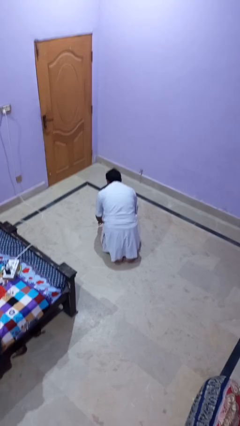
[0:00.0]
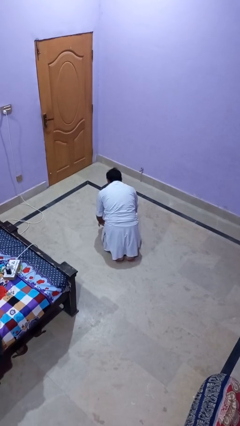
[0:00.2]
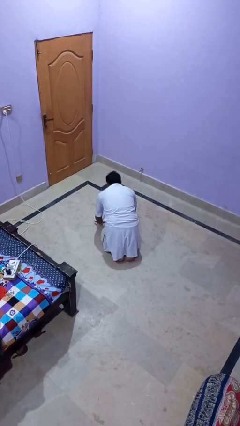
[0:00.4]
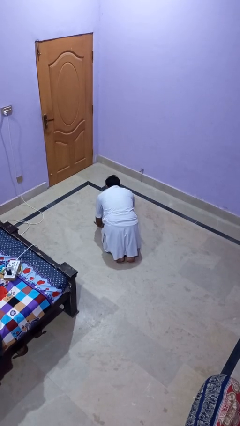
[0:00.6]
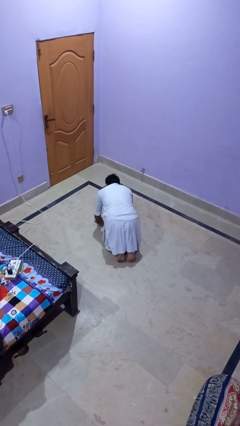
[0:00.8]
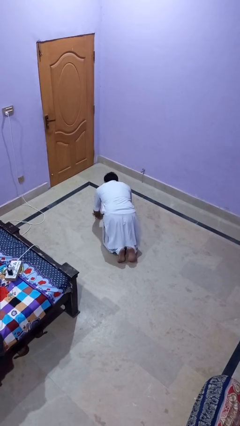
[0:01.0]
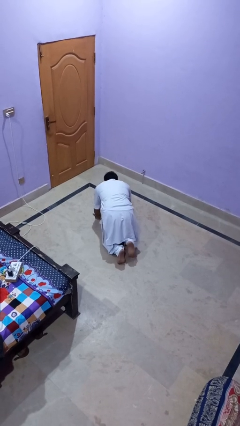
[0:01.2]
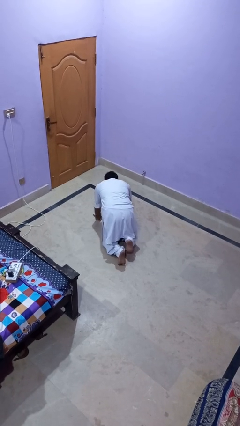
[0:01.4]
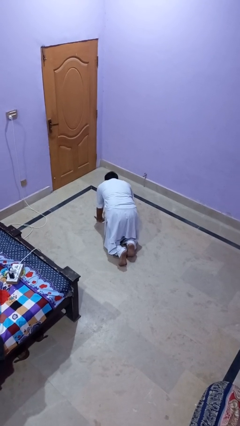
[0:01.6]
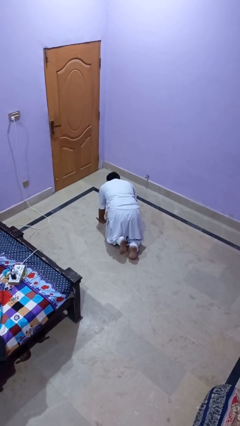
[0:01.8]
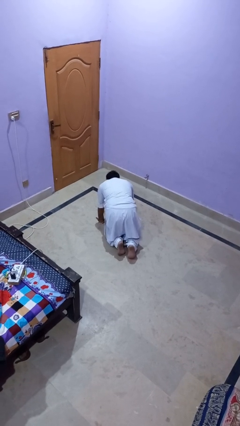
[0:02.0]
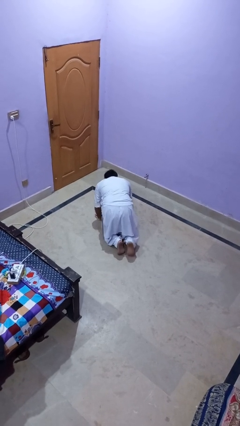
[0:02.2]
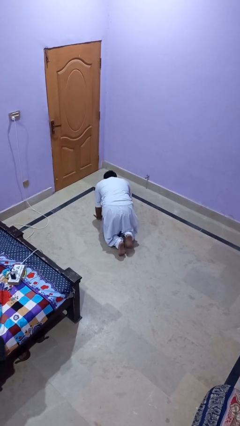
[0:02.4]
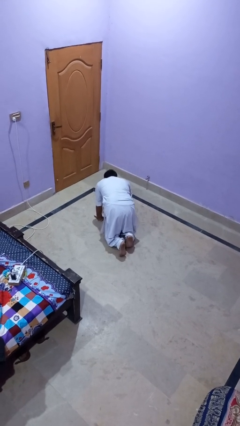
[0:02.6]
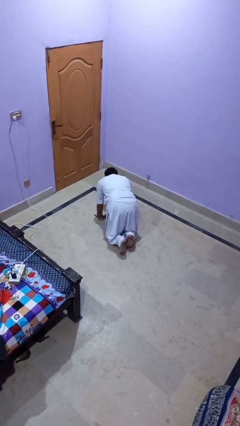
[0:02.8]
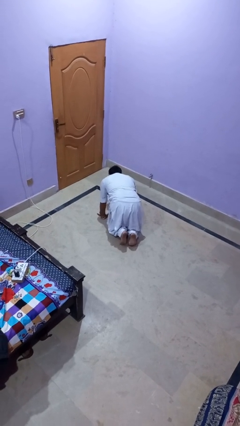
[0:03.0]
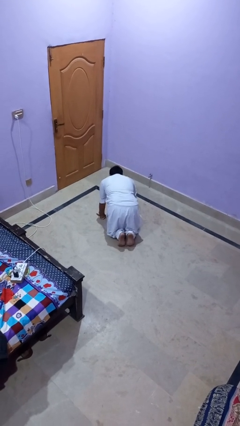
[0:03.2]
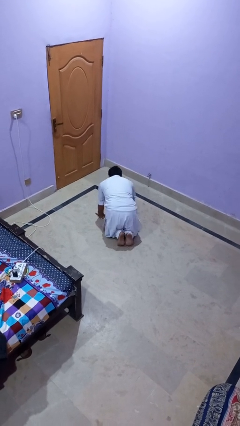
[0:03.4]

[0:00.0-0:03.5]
person crawls

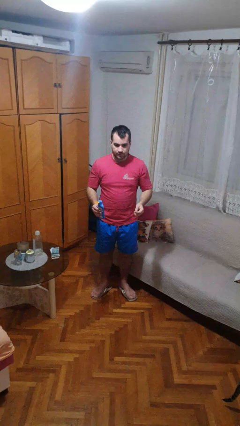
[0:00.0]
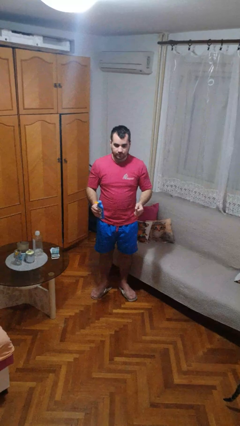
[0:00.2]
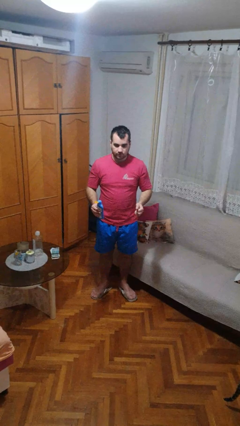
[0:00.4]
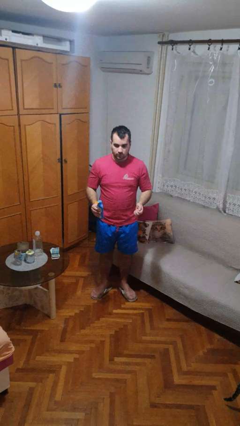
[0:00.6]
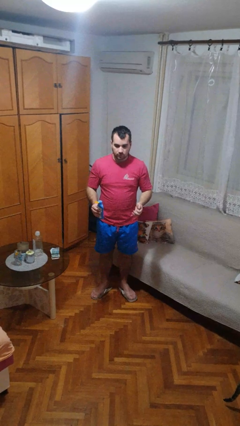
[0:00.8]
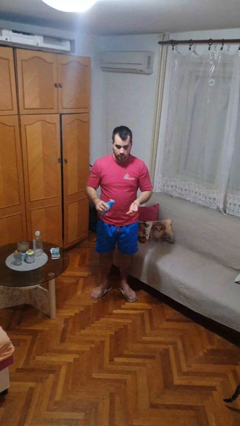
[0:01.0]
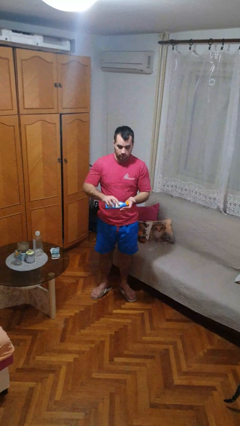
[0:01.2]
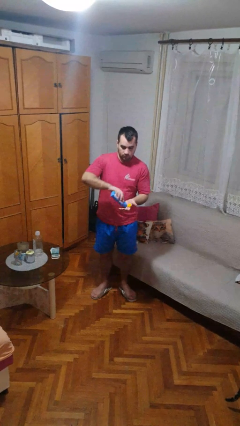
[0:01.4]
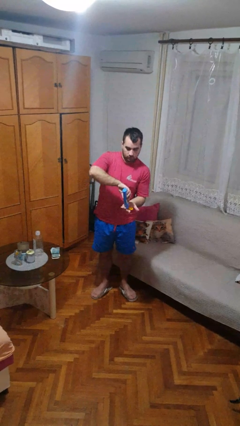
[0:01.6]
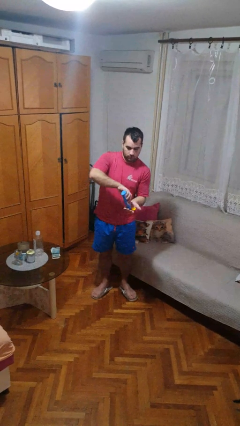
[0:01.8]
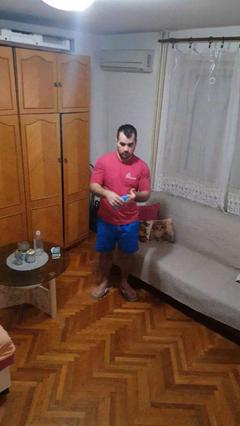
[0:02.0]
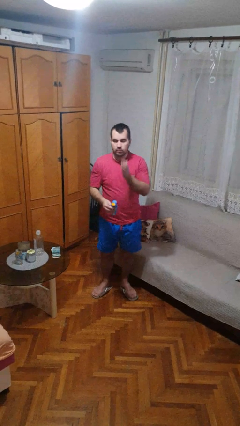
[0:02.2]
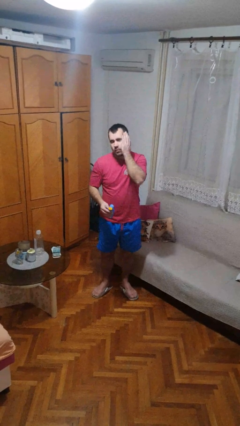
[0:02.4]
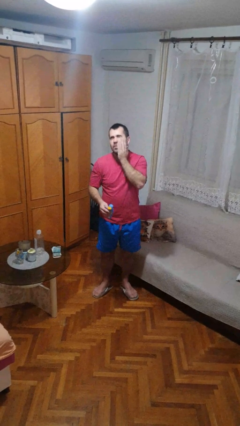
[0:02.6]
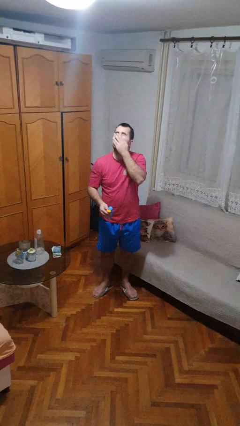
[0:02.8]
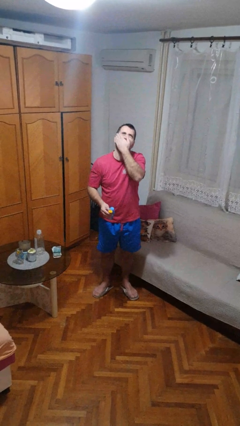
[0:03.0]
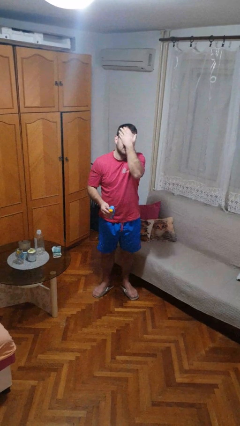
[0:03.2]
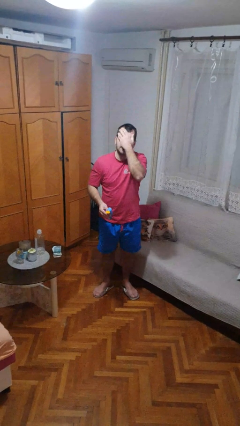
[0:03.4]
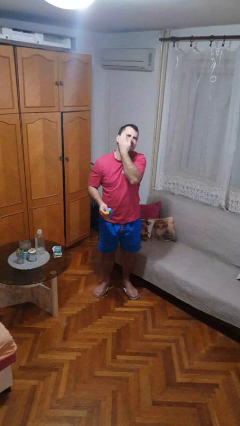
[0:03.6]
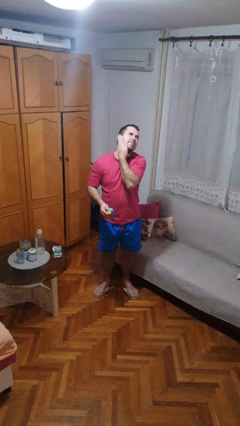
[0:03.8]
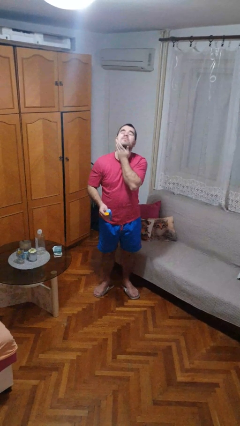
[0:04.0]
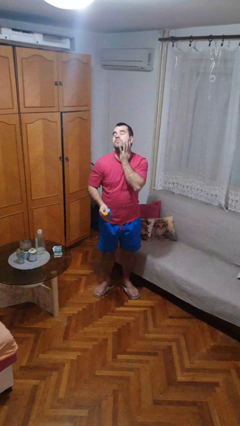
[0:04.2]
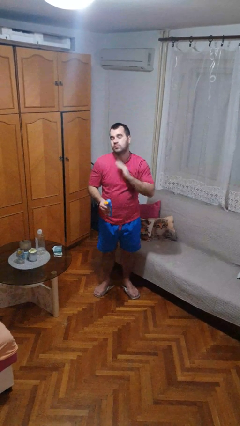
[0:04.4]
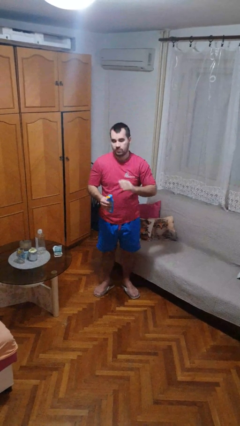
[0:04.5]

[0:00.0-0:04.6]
person applies sunscreen

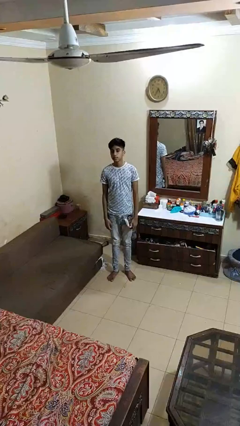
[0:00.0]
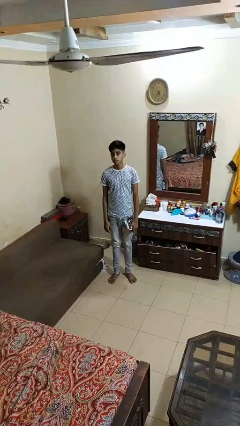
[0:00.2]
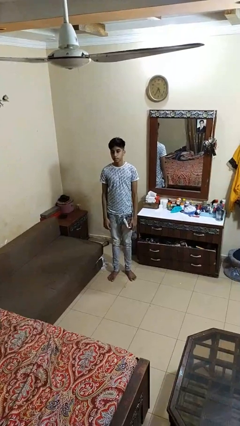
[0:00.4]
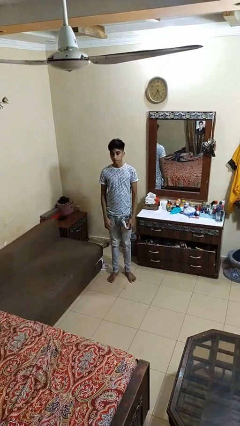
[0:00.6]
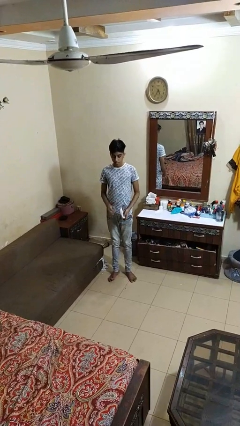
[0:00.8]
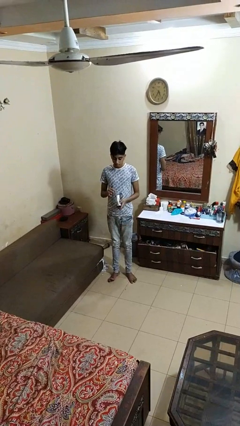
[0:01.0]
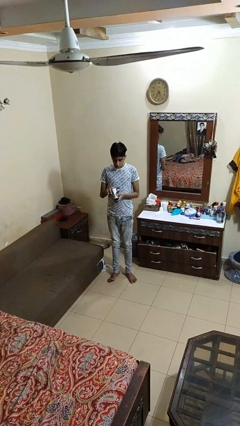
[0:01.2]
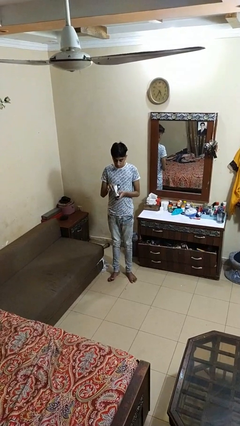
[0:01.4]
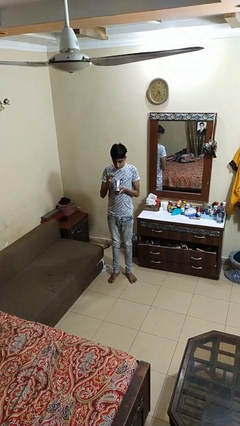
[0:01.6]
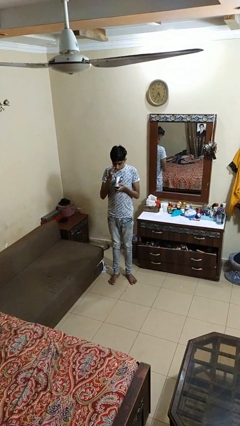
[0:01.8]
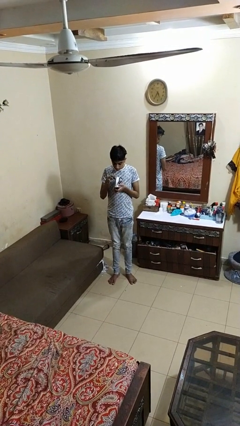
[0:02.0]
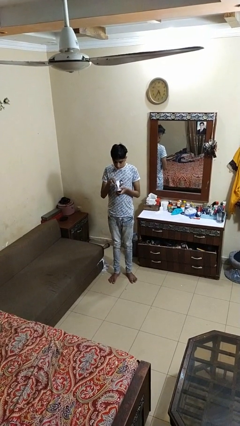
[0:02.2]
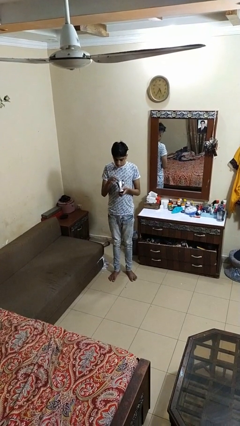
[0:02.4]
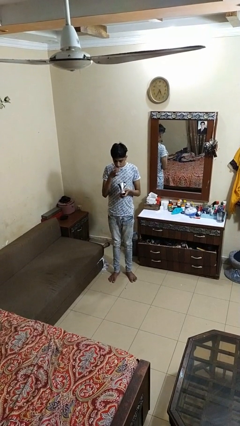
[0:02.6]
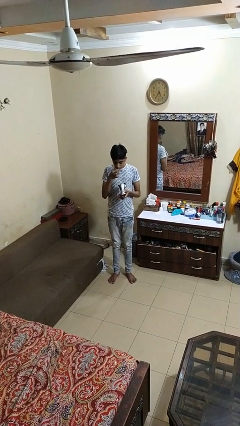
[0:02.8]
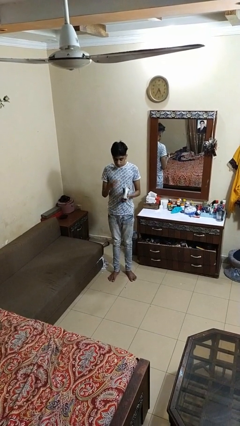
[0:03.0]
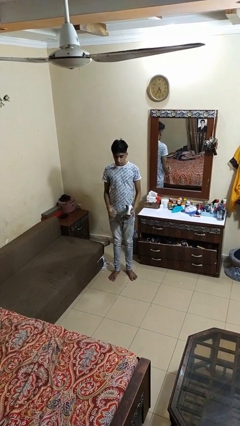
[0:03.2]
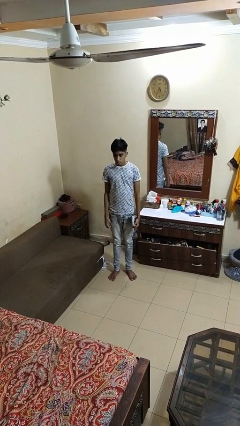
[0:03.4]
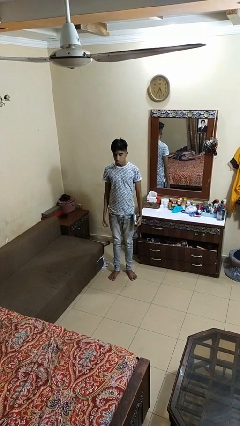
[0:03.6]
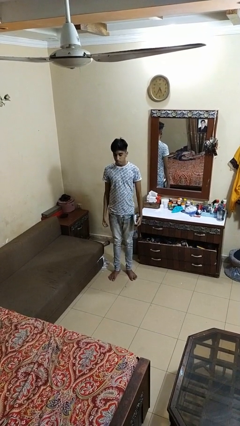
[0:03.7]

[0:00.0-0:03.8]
person eats snack from bag

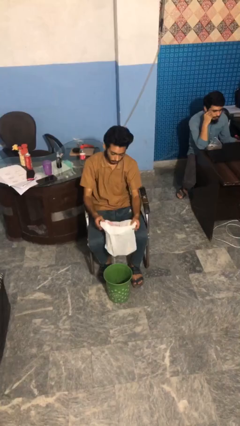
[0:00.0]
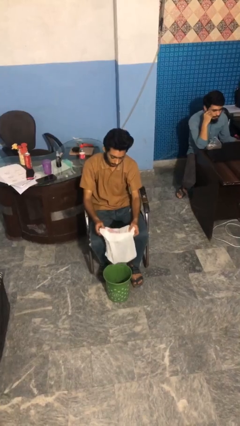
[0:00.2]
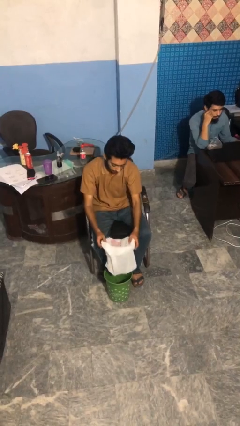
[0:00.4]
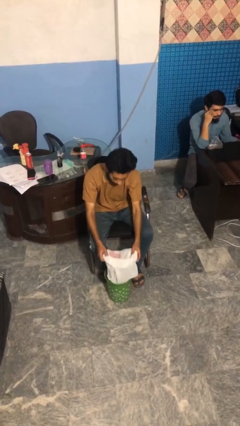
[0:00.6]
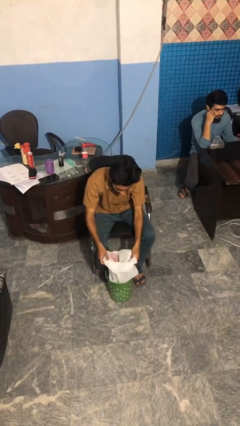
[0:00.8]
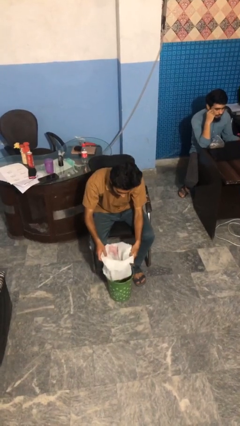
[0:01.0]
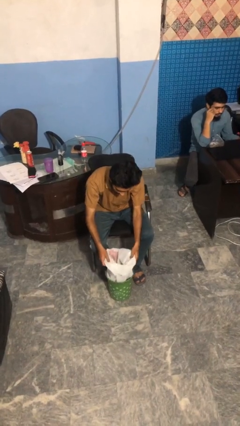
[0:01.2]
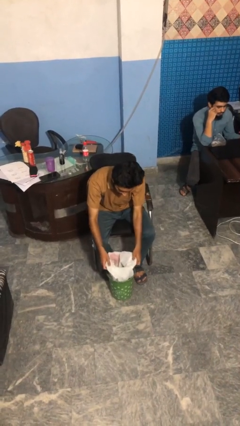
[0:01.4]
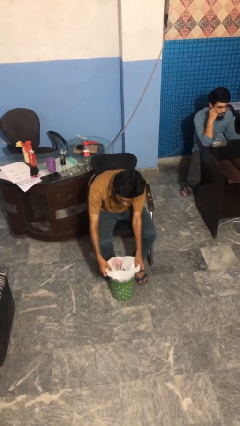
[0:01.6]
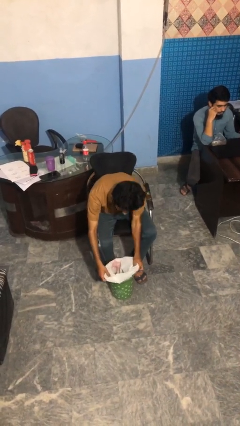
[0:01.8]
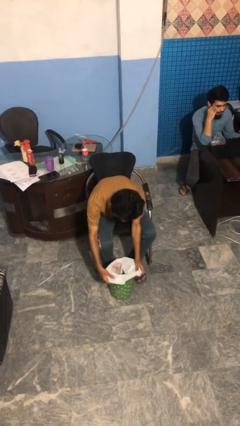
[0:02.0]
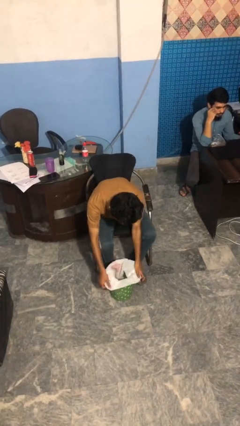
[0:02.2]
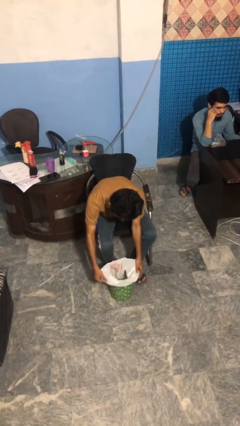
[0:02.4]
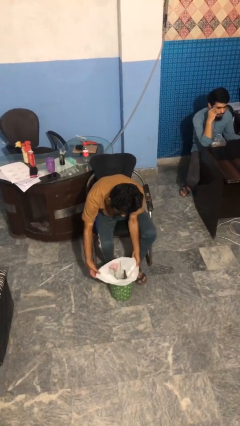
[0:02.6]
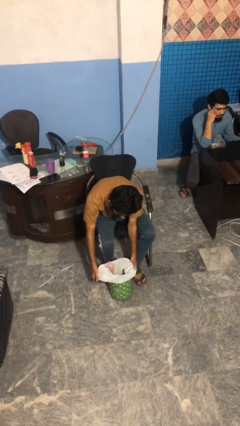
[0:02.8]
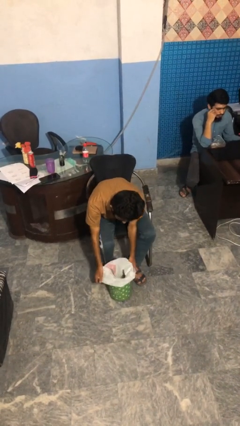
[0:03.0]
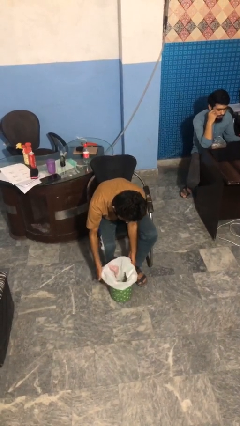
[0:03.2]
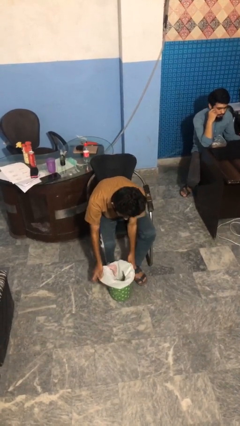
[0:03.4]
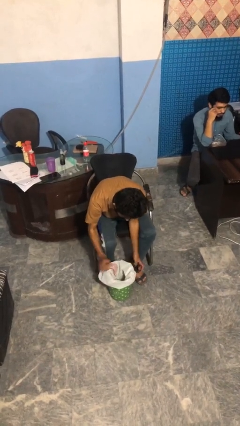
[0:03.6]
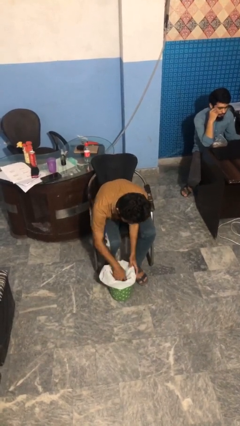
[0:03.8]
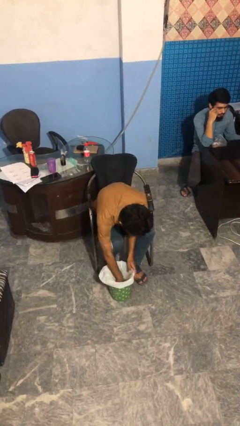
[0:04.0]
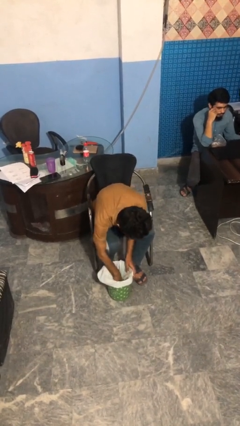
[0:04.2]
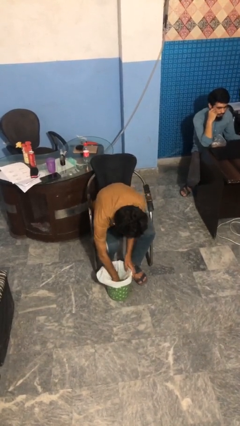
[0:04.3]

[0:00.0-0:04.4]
person inserts trashbag into trashcan

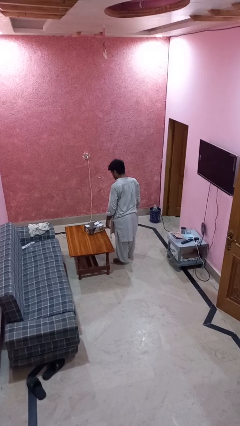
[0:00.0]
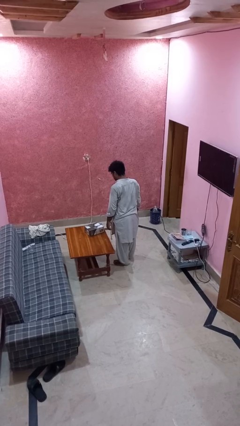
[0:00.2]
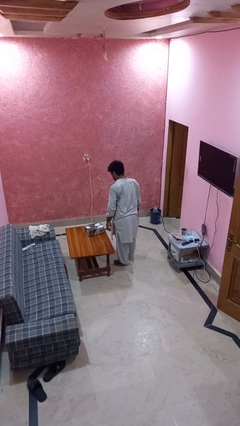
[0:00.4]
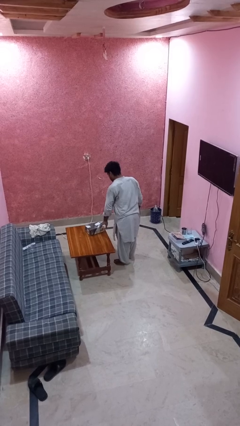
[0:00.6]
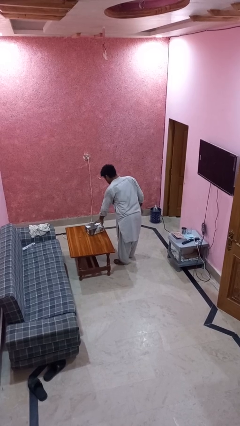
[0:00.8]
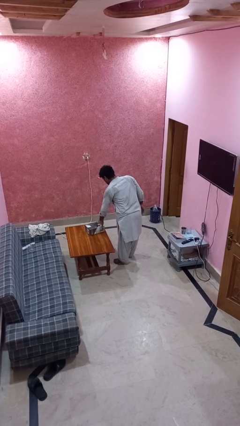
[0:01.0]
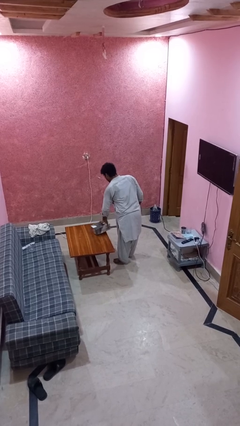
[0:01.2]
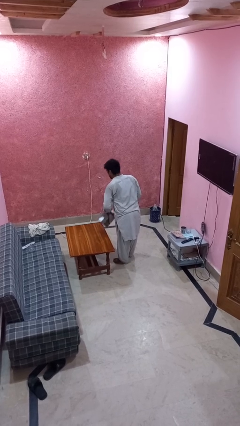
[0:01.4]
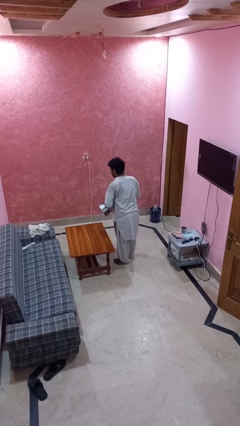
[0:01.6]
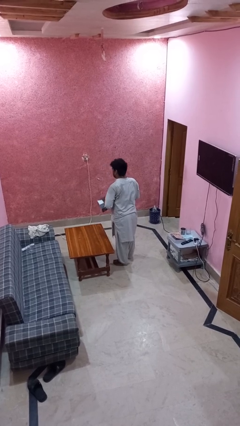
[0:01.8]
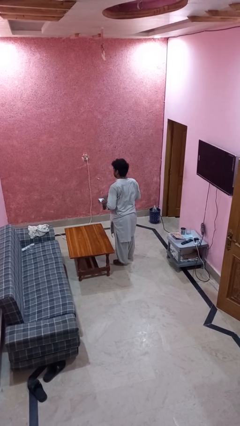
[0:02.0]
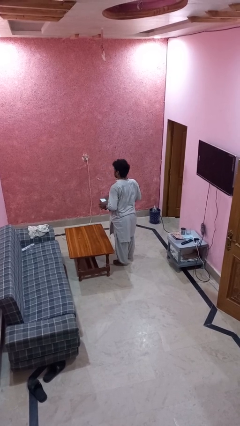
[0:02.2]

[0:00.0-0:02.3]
person picks up object from table
